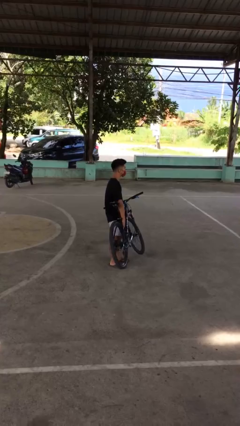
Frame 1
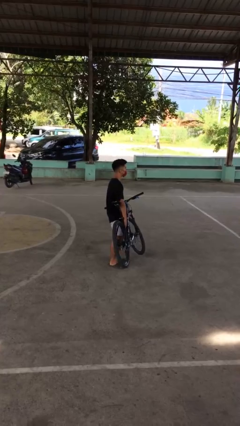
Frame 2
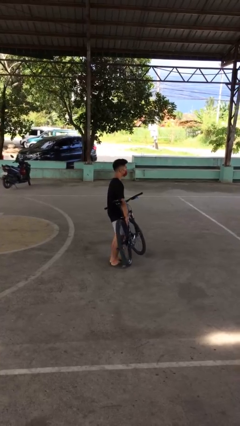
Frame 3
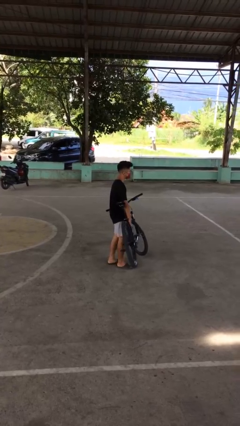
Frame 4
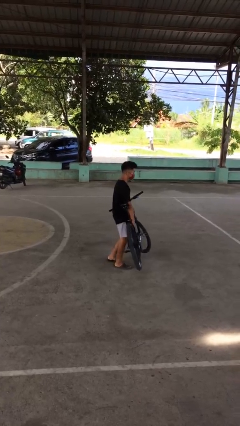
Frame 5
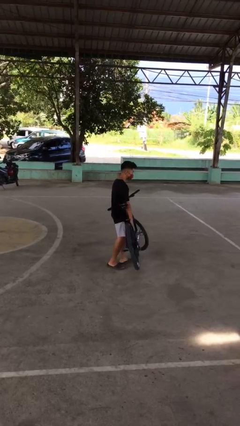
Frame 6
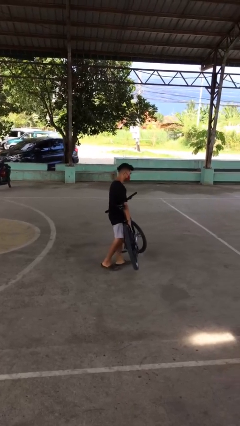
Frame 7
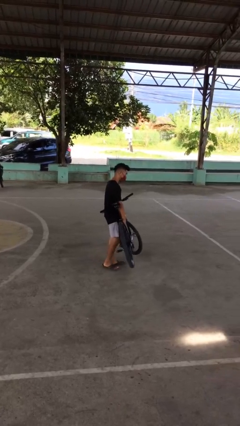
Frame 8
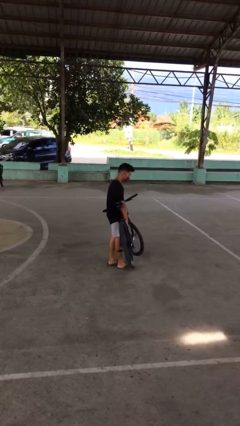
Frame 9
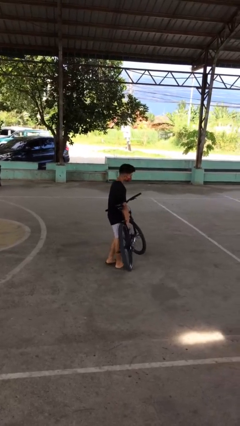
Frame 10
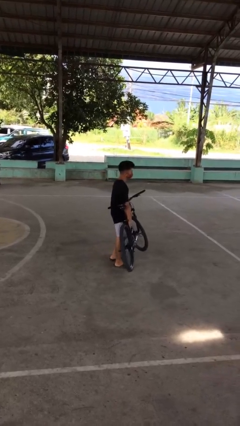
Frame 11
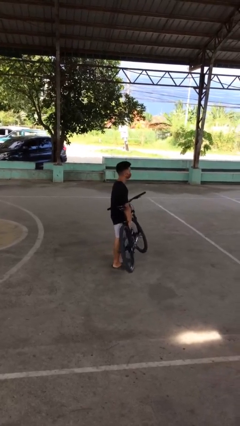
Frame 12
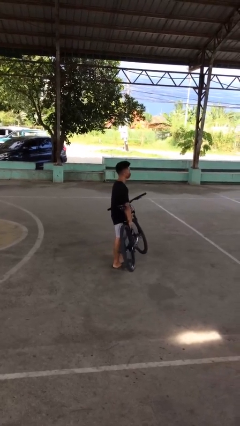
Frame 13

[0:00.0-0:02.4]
person carries bicycle

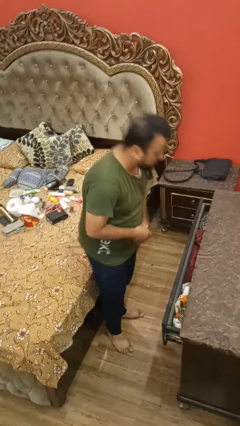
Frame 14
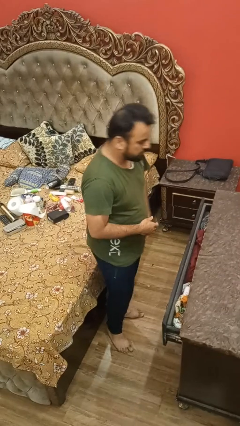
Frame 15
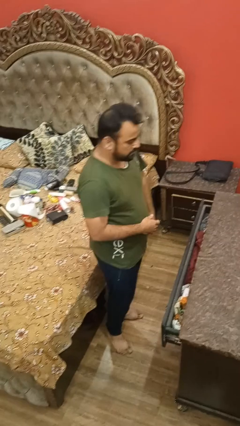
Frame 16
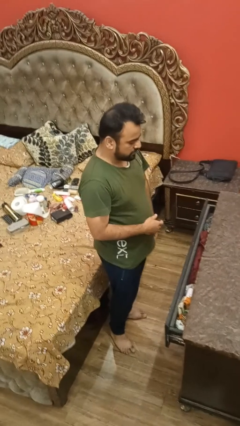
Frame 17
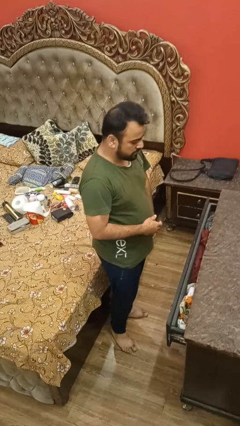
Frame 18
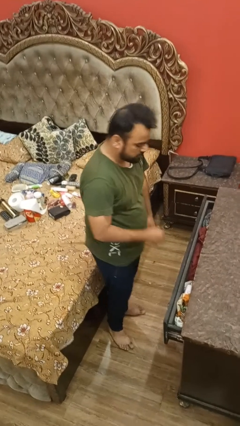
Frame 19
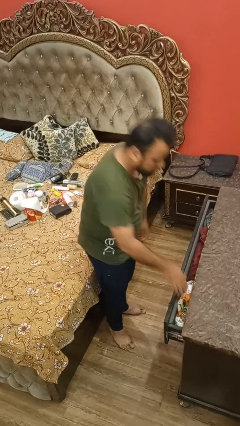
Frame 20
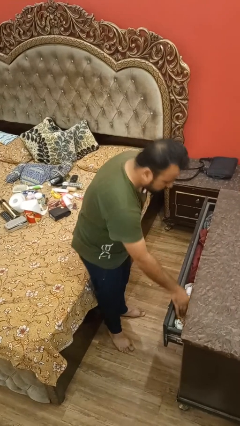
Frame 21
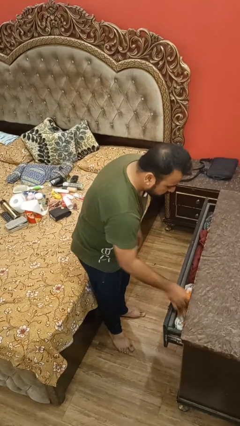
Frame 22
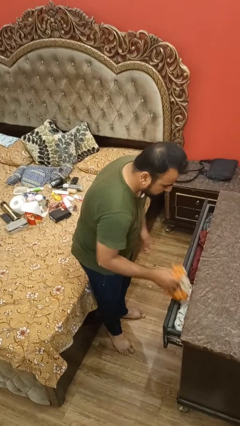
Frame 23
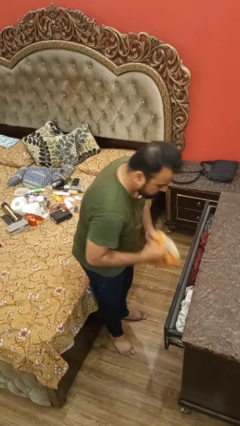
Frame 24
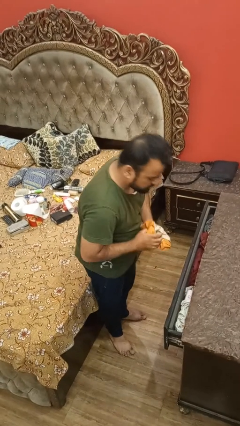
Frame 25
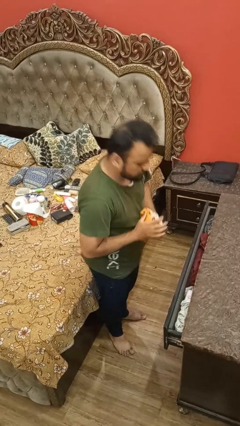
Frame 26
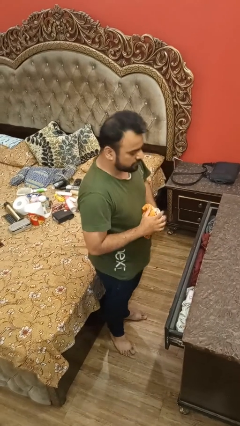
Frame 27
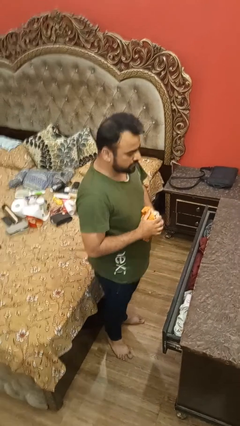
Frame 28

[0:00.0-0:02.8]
person takes clothes from dresser

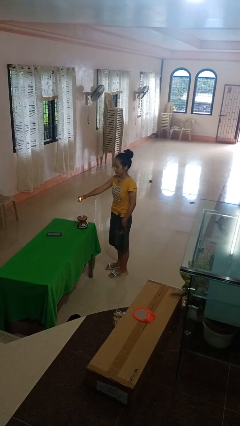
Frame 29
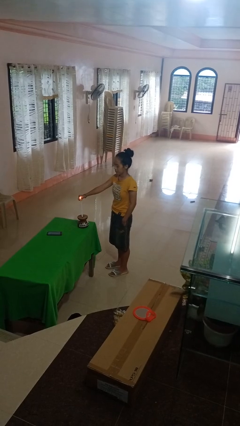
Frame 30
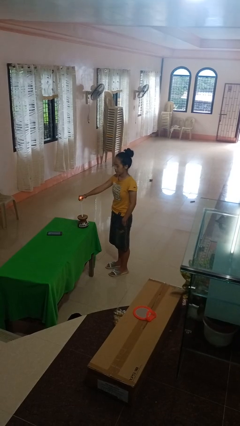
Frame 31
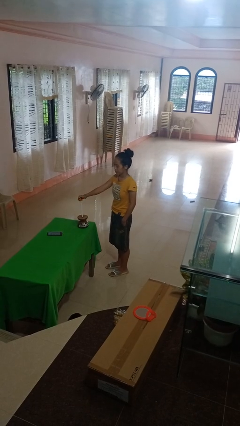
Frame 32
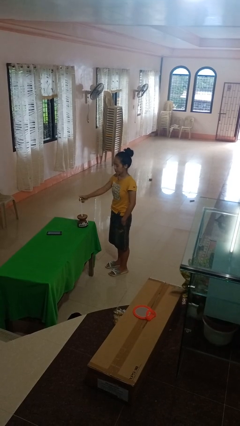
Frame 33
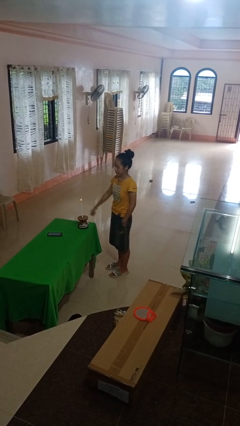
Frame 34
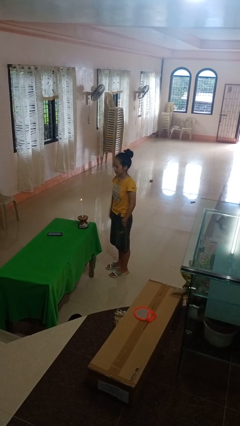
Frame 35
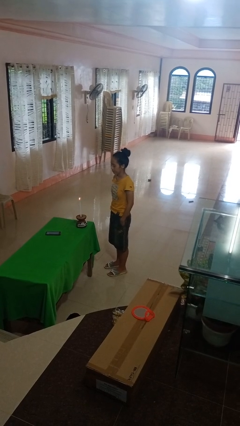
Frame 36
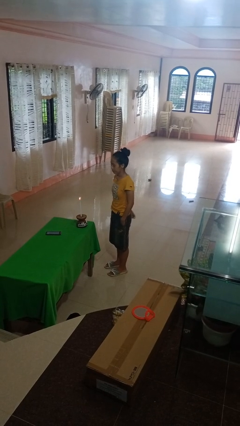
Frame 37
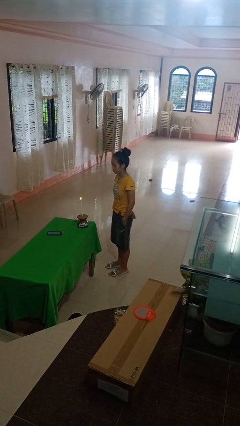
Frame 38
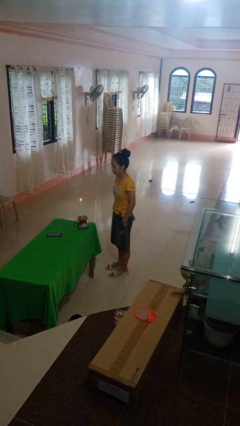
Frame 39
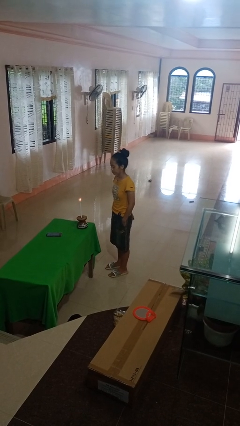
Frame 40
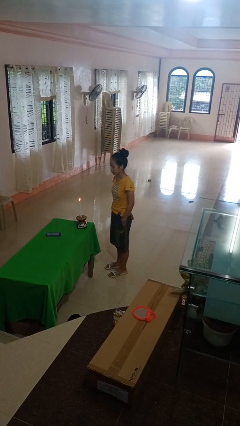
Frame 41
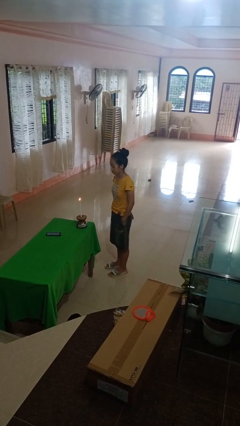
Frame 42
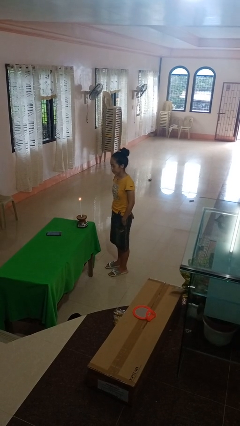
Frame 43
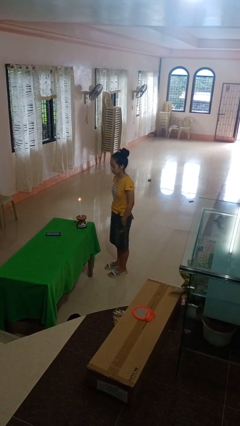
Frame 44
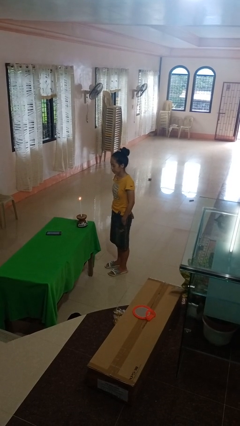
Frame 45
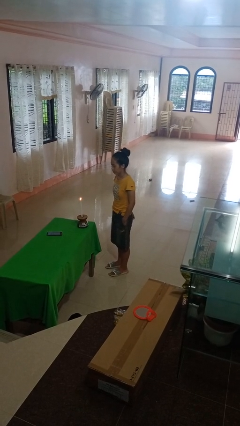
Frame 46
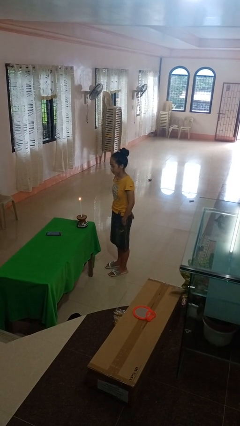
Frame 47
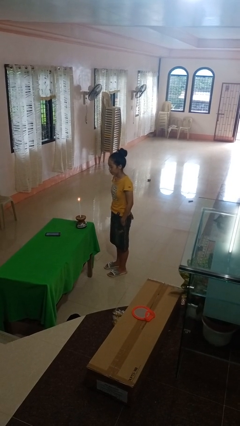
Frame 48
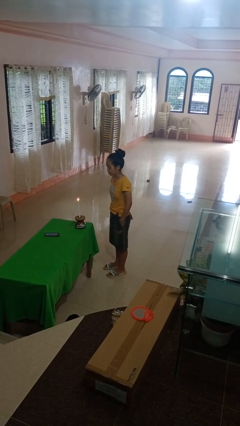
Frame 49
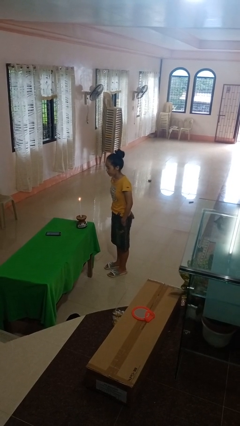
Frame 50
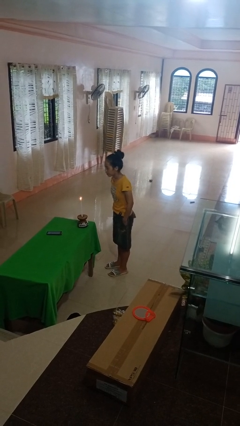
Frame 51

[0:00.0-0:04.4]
person lights candle

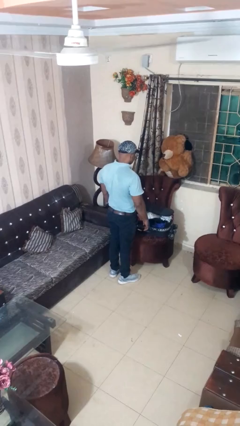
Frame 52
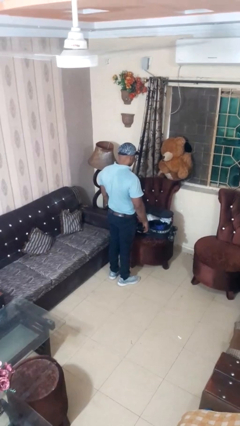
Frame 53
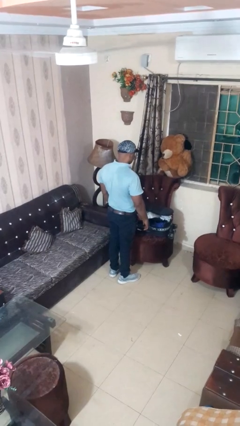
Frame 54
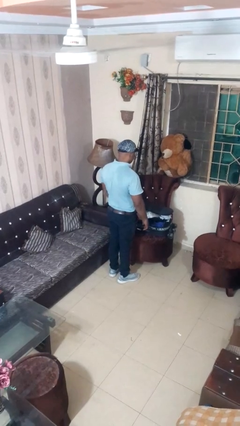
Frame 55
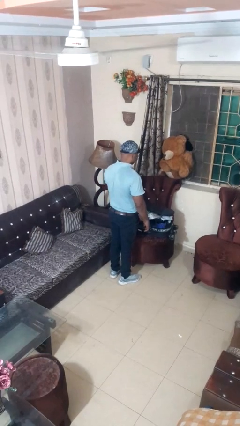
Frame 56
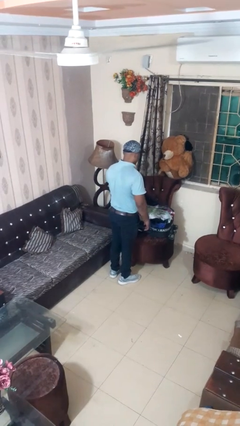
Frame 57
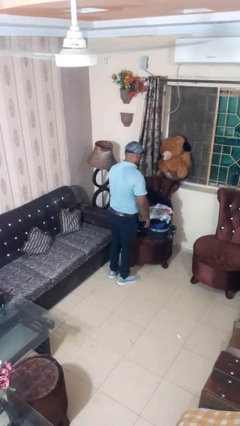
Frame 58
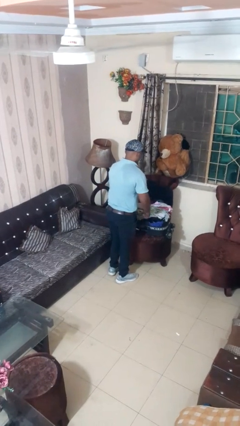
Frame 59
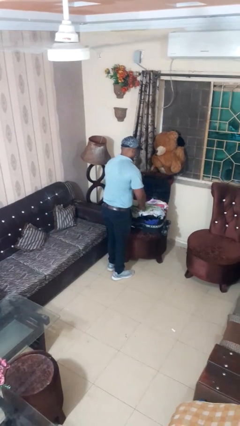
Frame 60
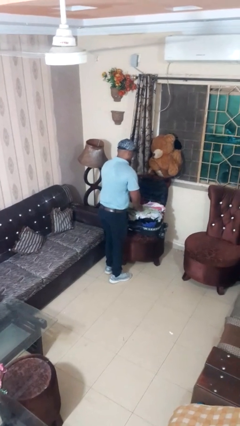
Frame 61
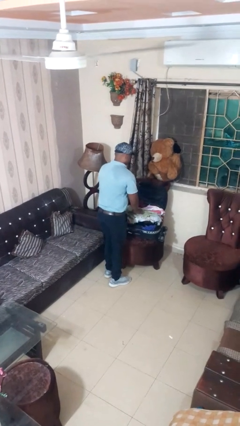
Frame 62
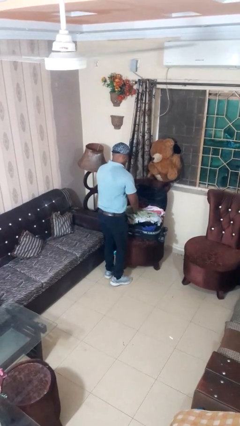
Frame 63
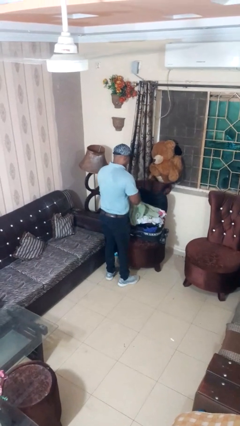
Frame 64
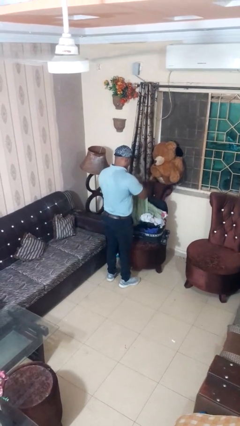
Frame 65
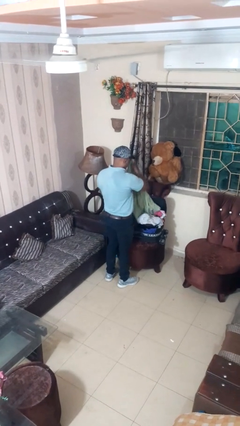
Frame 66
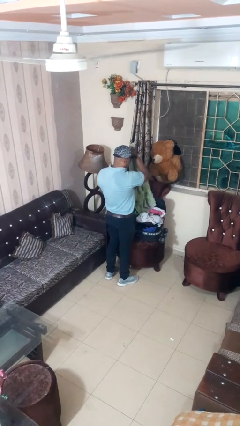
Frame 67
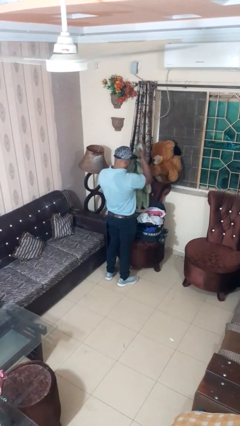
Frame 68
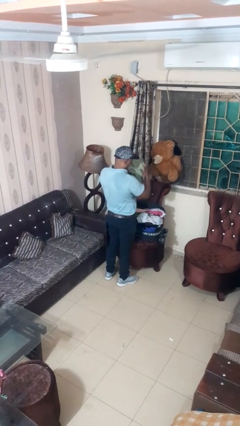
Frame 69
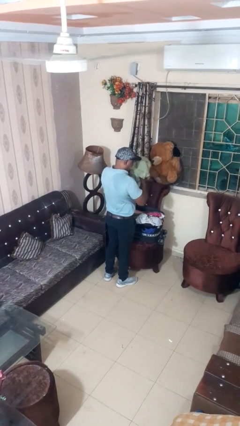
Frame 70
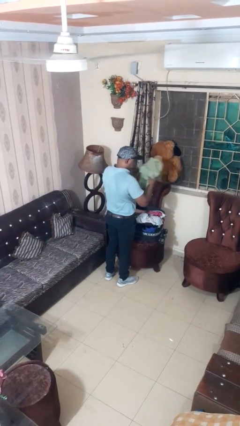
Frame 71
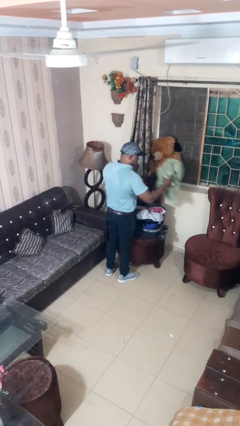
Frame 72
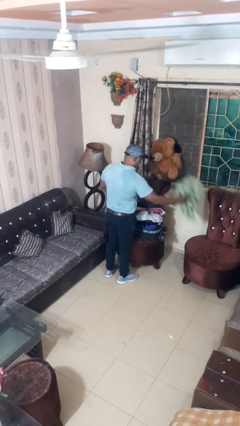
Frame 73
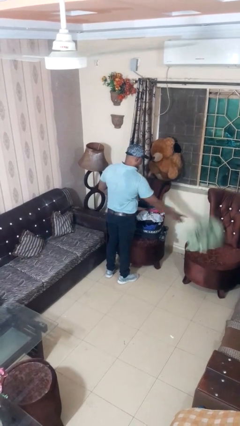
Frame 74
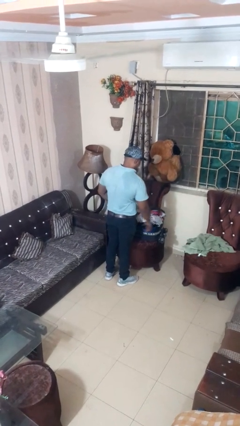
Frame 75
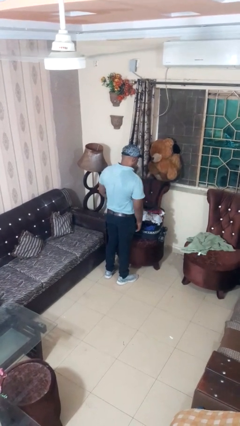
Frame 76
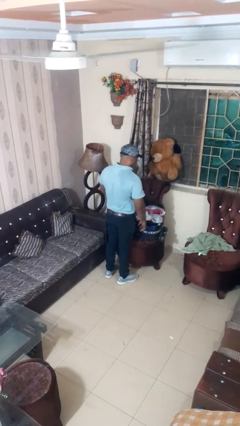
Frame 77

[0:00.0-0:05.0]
person unloads clothes from suitcase

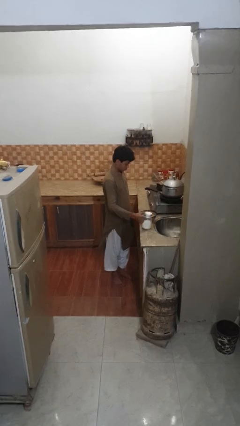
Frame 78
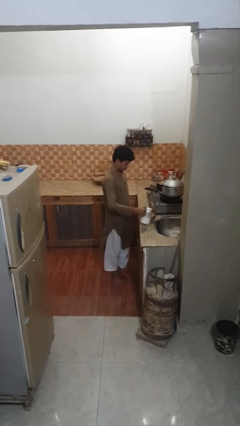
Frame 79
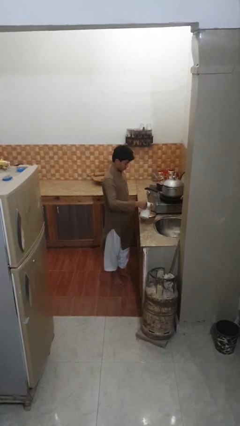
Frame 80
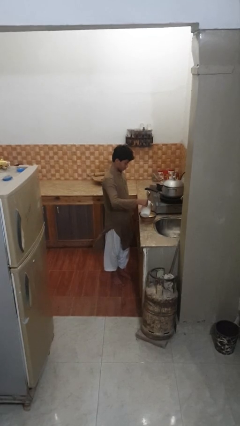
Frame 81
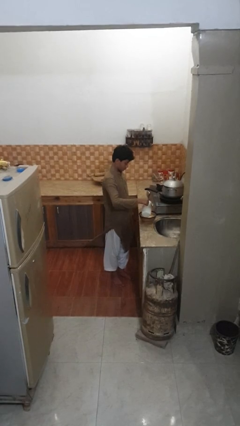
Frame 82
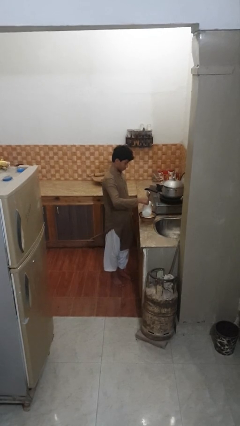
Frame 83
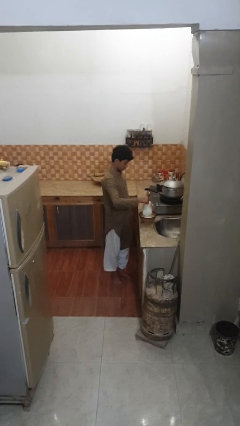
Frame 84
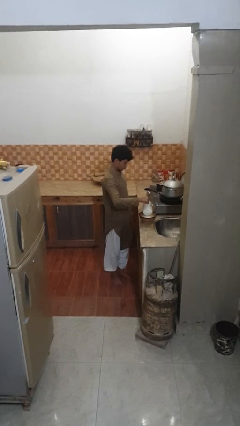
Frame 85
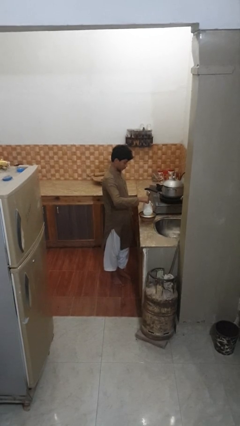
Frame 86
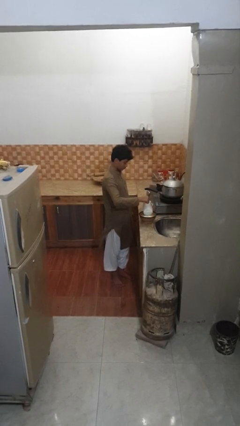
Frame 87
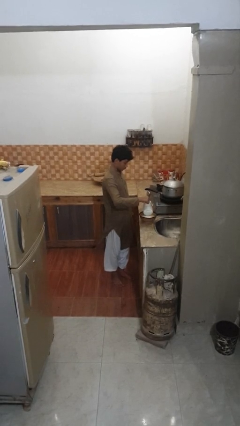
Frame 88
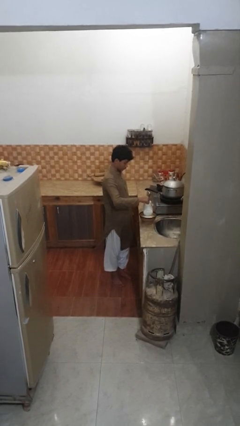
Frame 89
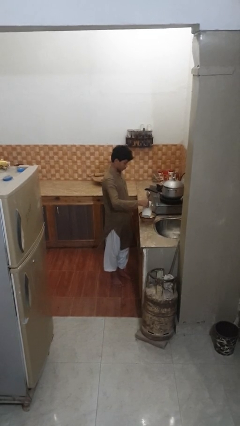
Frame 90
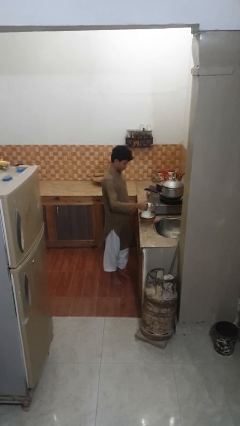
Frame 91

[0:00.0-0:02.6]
person pours into bowl

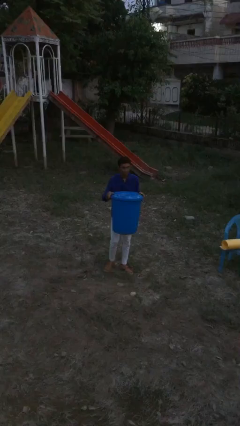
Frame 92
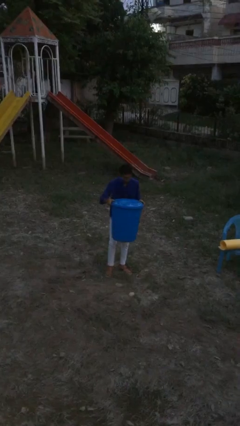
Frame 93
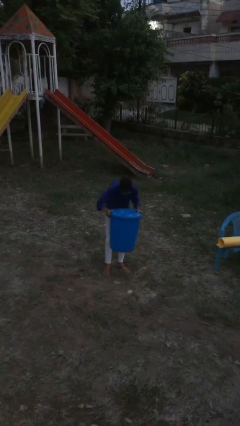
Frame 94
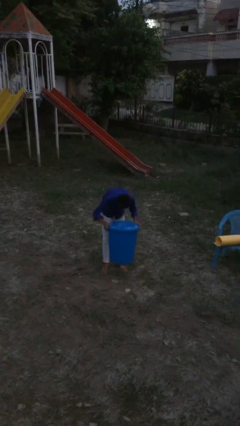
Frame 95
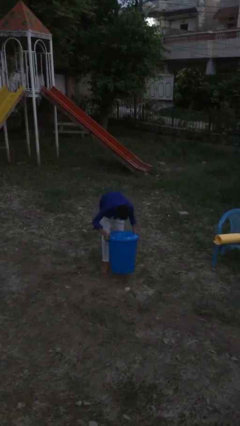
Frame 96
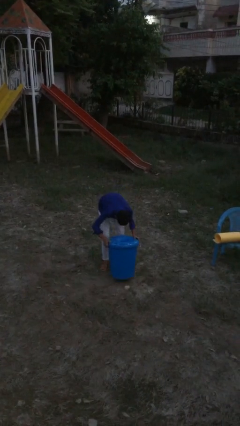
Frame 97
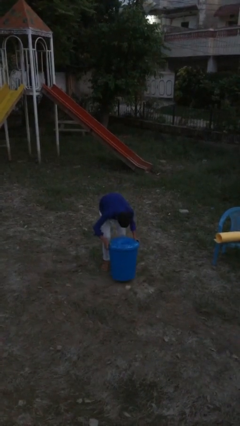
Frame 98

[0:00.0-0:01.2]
person puts down object on floor
